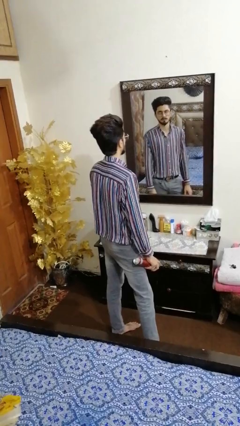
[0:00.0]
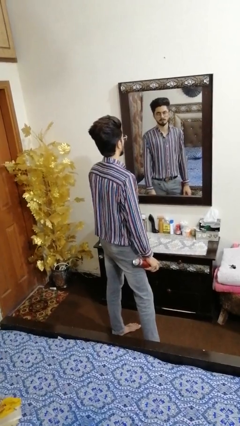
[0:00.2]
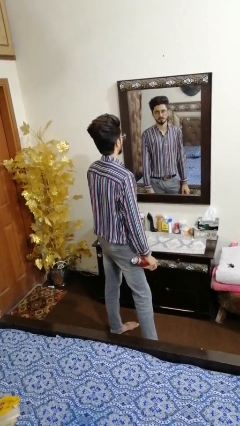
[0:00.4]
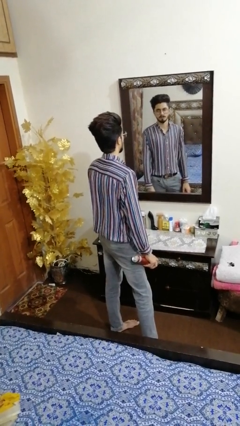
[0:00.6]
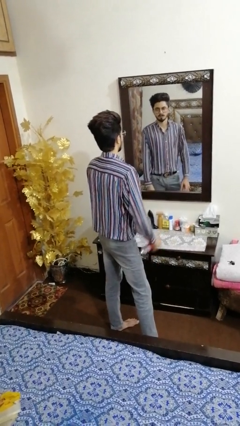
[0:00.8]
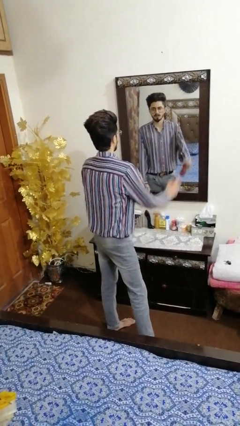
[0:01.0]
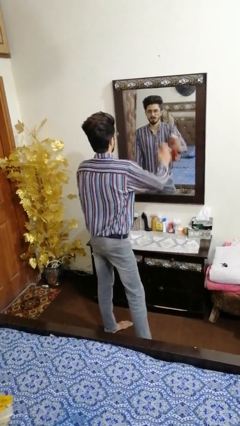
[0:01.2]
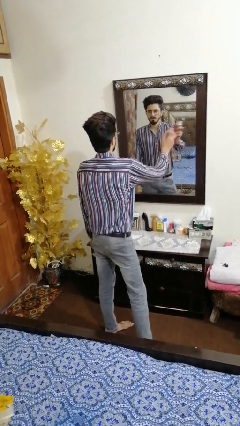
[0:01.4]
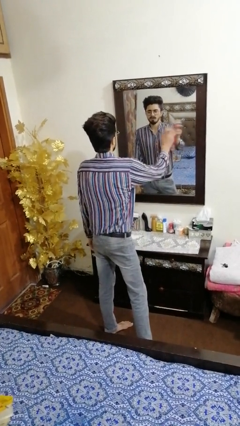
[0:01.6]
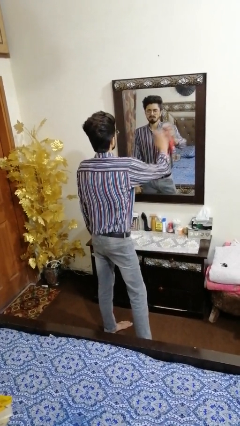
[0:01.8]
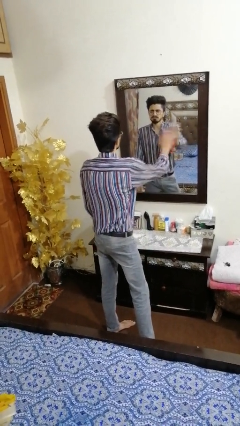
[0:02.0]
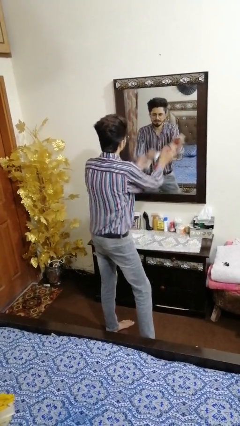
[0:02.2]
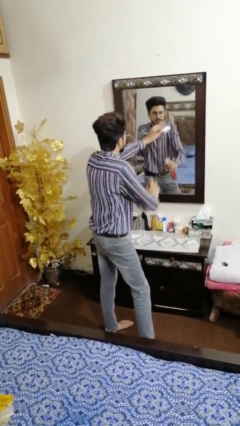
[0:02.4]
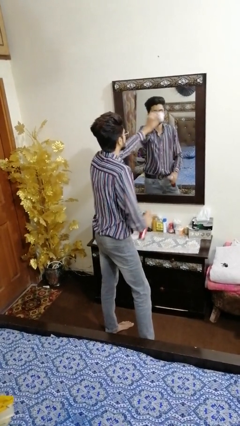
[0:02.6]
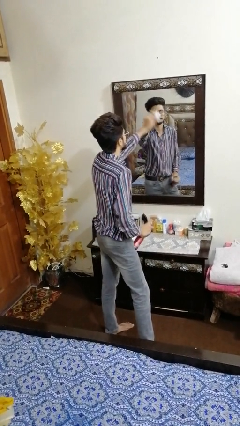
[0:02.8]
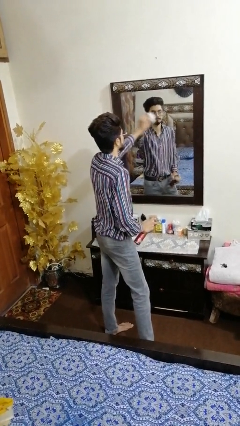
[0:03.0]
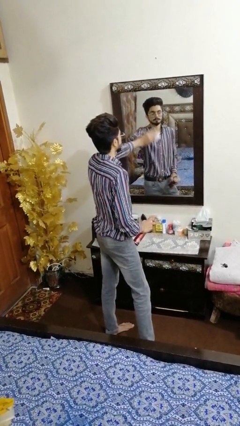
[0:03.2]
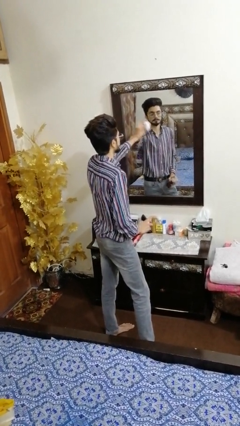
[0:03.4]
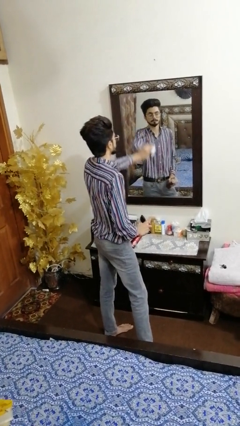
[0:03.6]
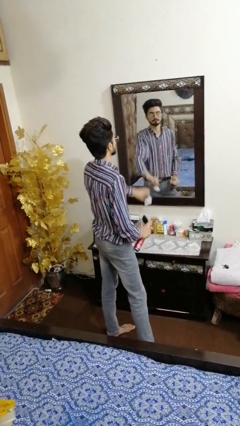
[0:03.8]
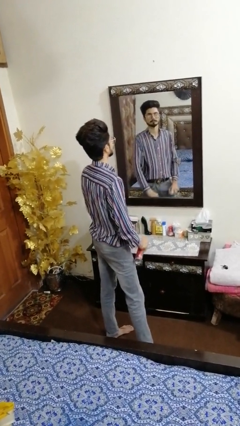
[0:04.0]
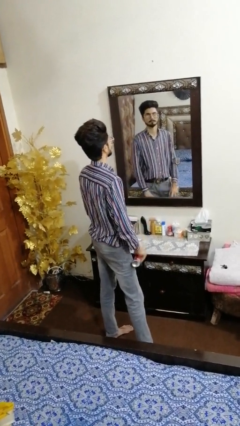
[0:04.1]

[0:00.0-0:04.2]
person sprays from bottle

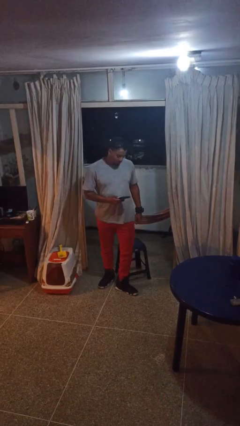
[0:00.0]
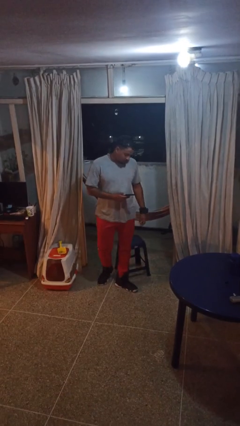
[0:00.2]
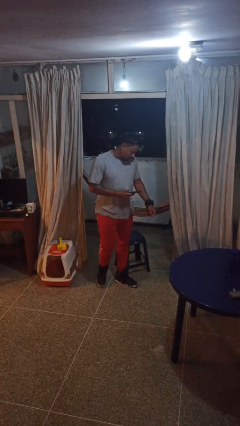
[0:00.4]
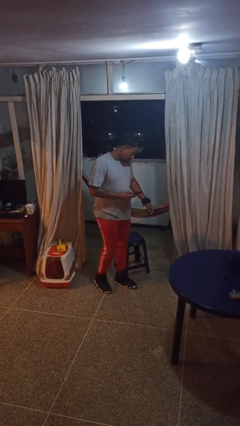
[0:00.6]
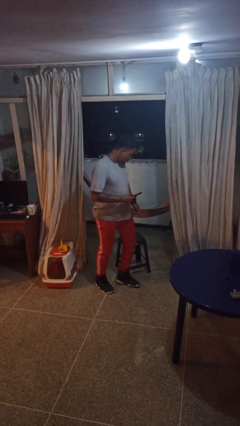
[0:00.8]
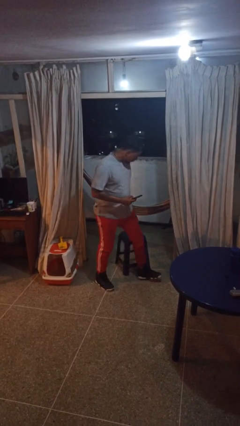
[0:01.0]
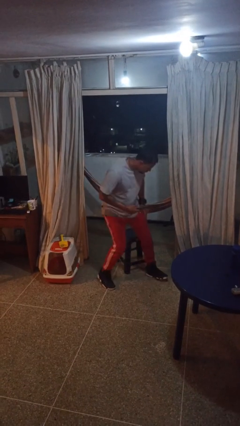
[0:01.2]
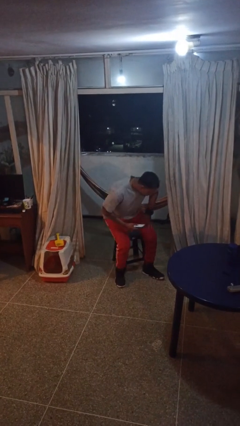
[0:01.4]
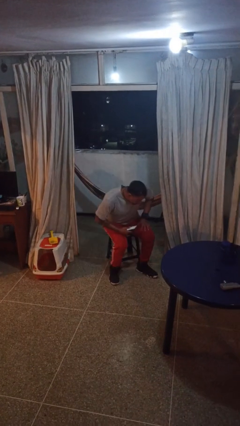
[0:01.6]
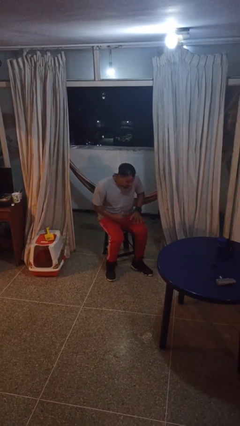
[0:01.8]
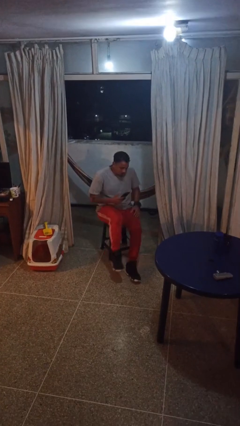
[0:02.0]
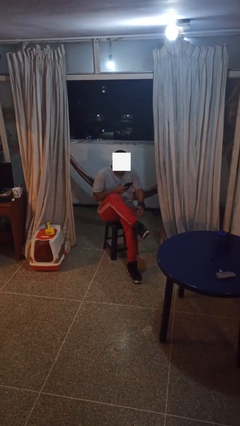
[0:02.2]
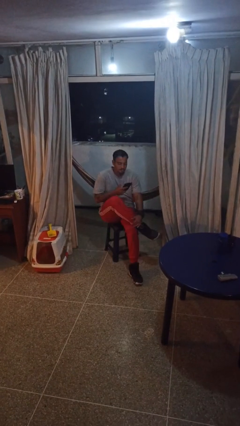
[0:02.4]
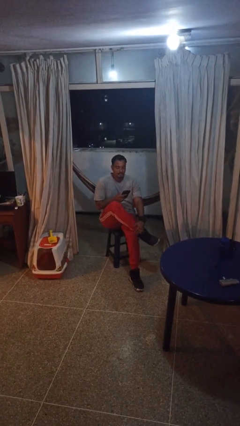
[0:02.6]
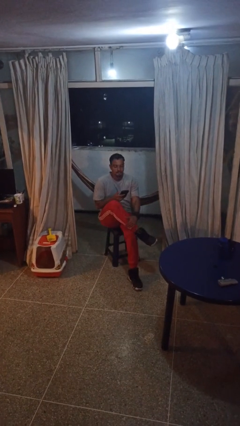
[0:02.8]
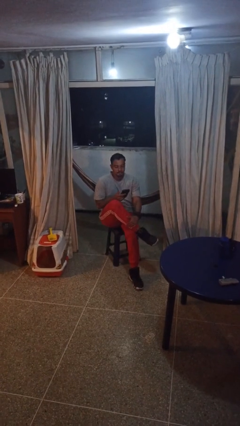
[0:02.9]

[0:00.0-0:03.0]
person sits down

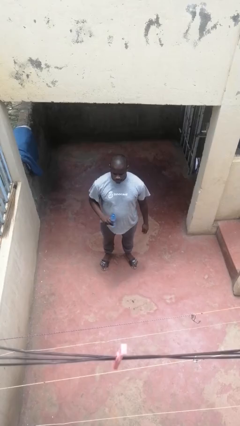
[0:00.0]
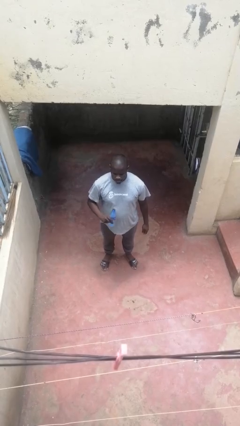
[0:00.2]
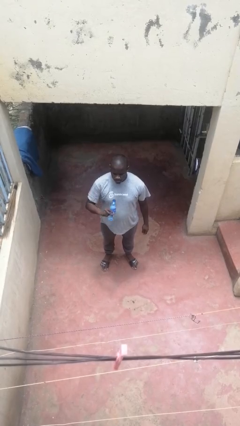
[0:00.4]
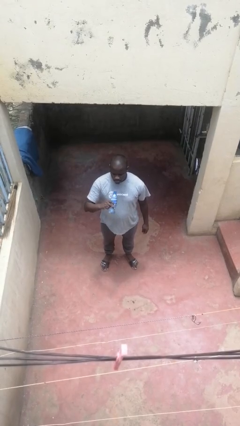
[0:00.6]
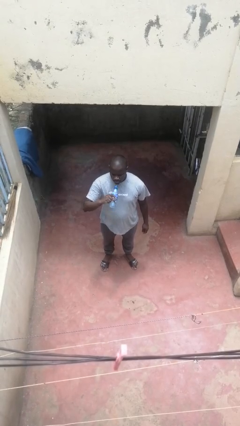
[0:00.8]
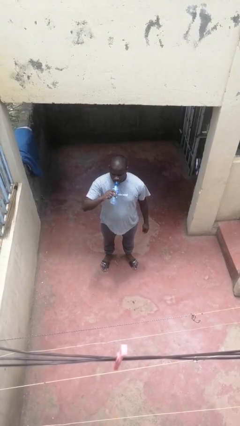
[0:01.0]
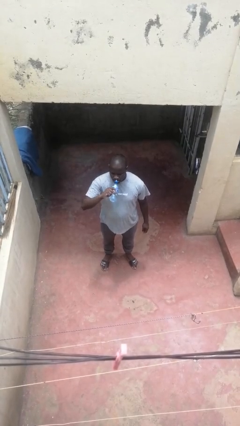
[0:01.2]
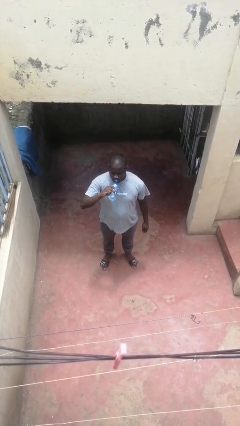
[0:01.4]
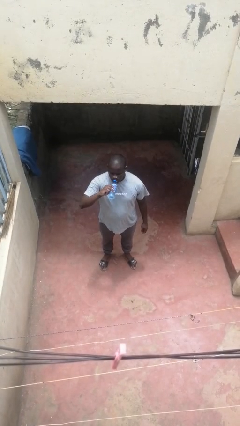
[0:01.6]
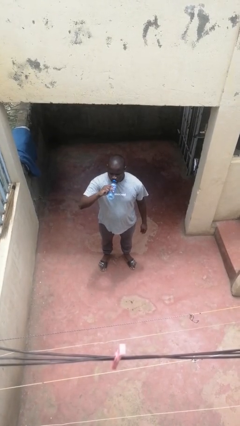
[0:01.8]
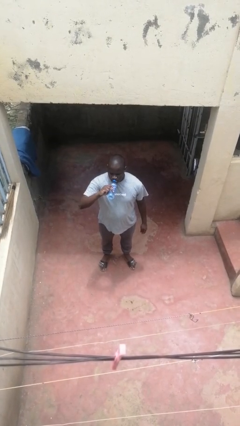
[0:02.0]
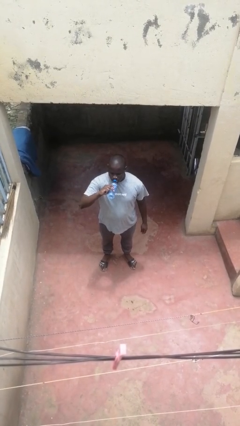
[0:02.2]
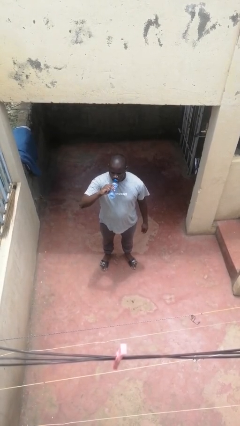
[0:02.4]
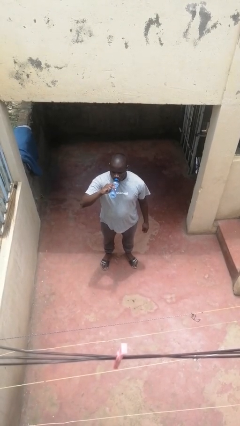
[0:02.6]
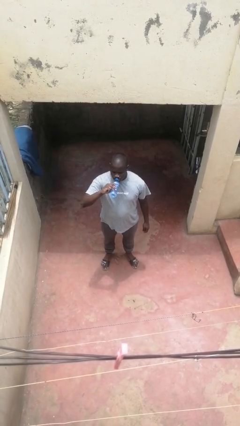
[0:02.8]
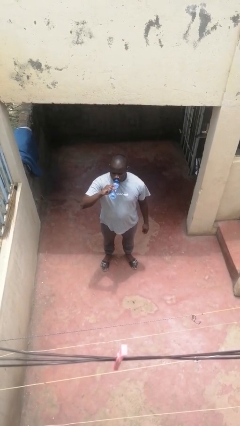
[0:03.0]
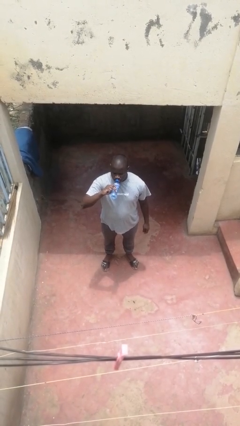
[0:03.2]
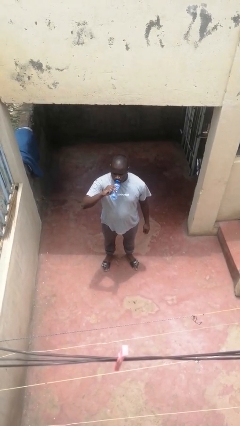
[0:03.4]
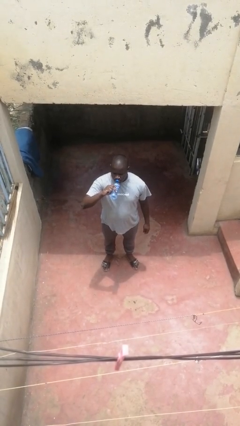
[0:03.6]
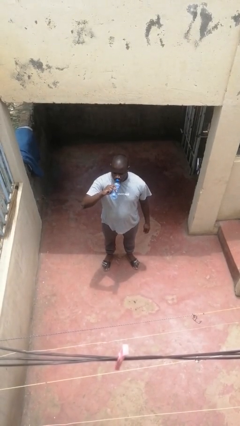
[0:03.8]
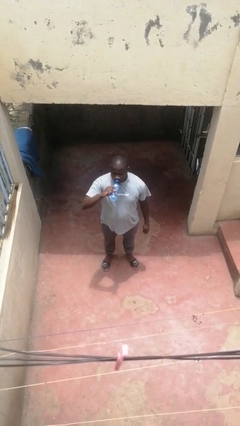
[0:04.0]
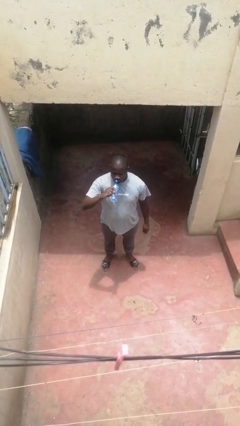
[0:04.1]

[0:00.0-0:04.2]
person drinks from bottle

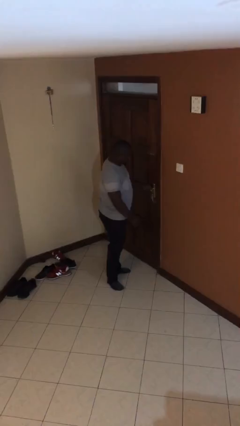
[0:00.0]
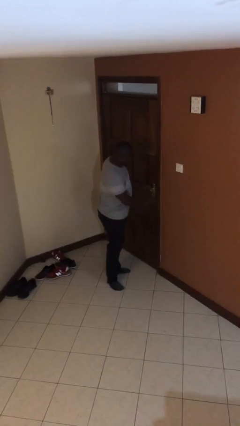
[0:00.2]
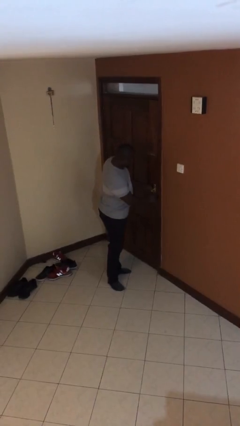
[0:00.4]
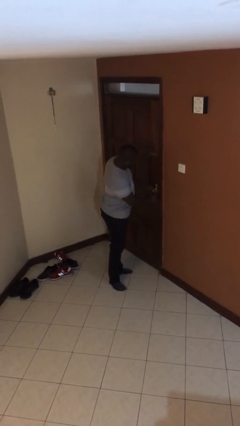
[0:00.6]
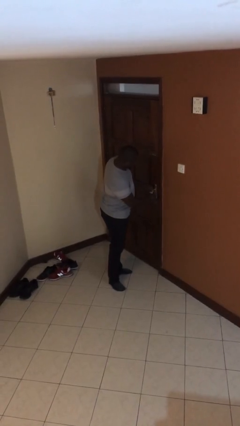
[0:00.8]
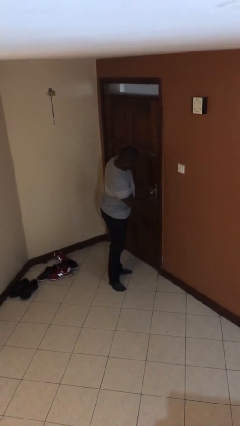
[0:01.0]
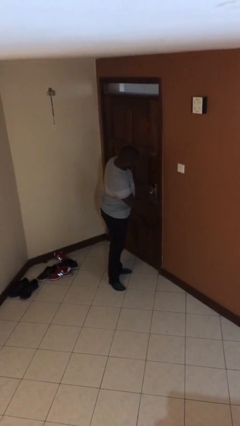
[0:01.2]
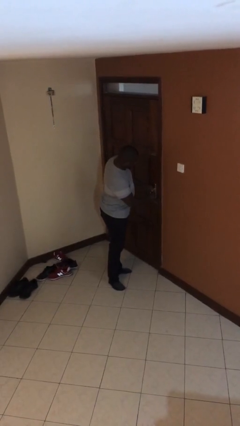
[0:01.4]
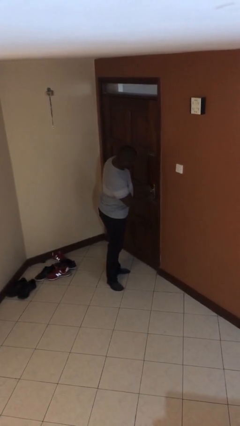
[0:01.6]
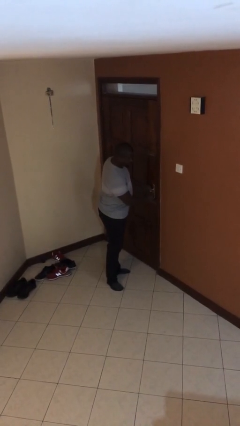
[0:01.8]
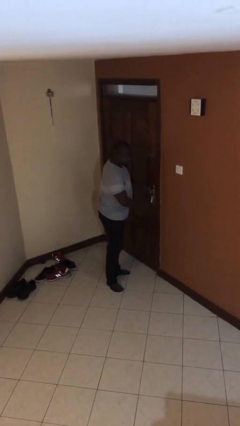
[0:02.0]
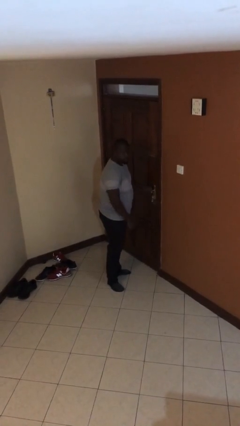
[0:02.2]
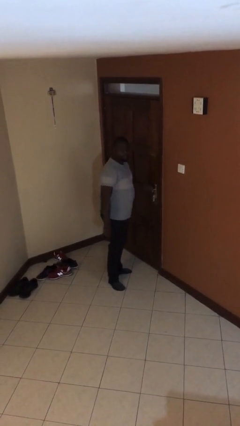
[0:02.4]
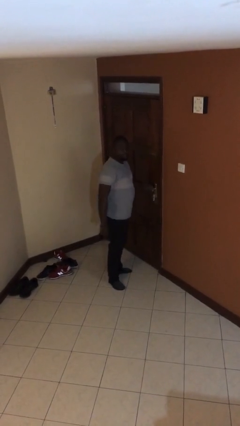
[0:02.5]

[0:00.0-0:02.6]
person locks door with keys

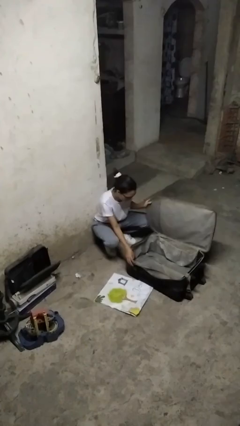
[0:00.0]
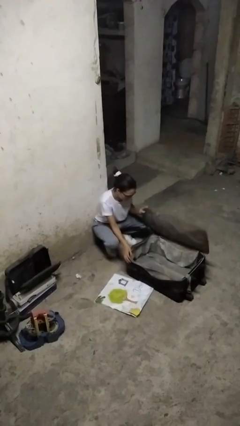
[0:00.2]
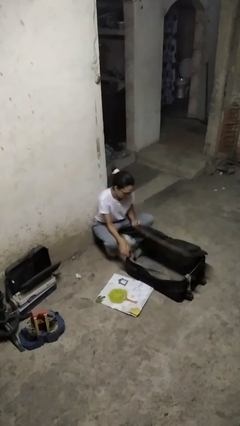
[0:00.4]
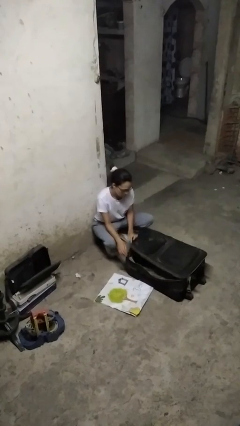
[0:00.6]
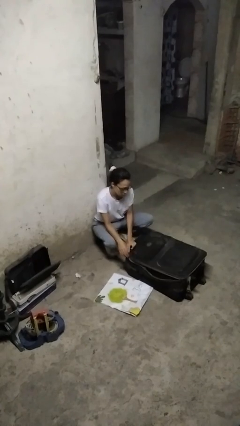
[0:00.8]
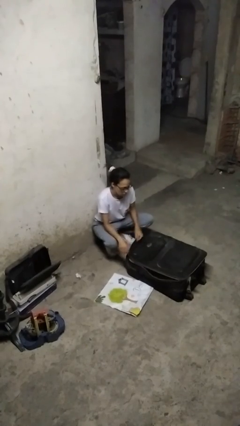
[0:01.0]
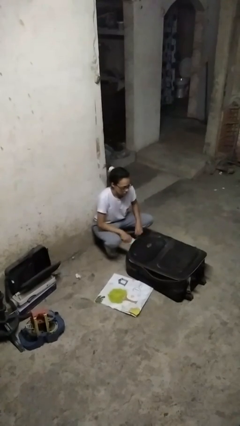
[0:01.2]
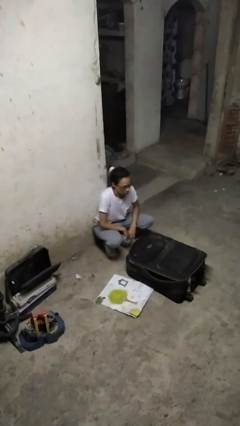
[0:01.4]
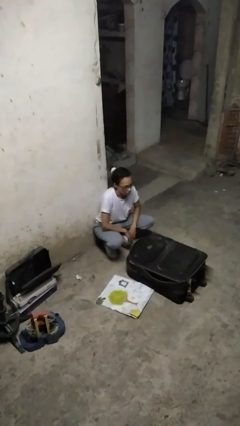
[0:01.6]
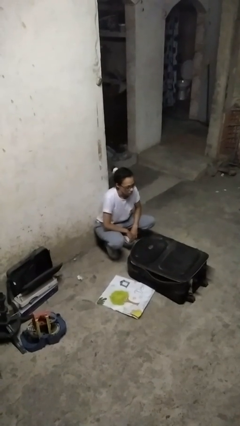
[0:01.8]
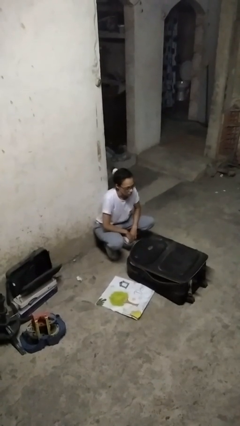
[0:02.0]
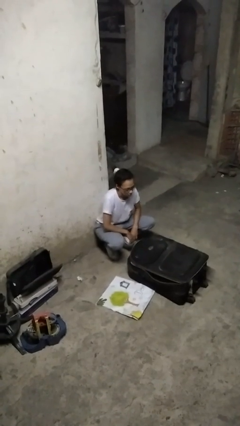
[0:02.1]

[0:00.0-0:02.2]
person closes suitcase

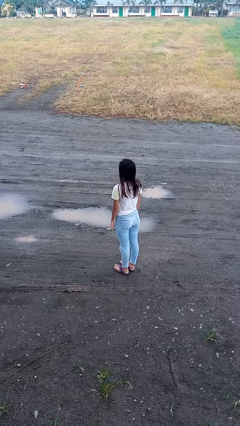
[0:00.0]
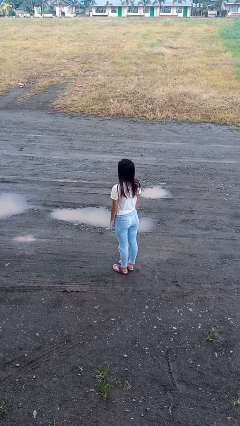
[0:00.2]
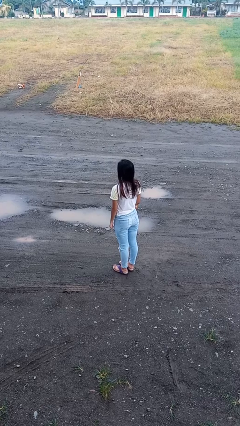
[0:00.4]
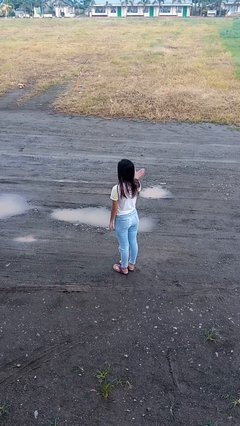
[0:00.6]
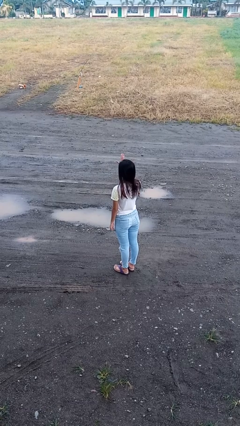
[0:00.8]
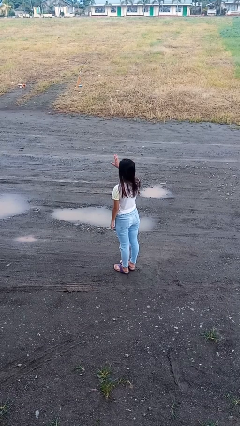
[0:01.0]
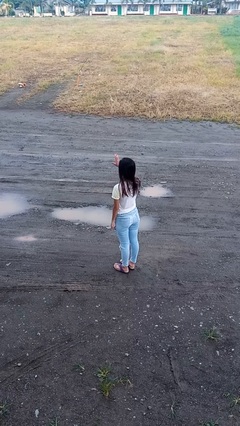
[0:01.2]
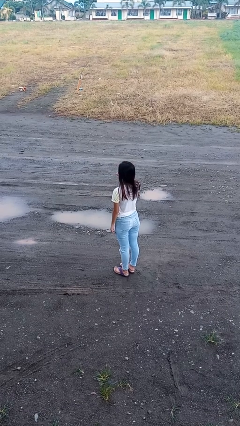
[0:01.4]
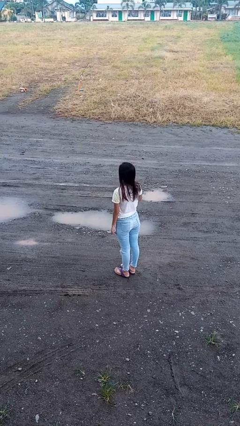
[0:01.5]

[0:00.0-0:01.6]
person gestures swipe left
